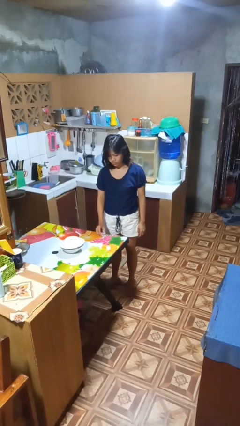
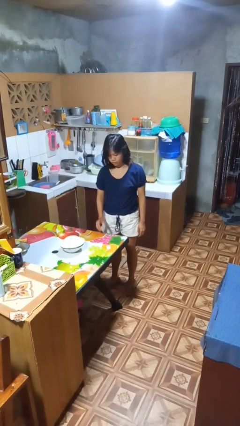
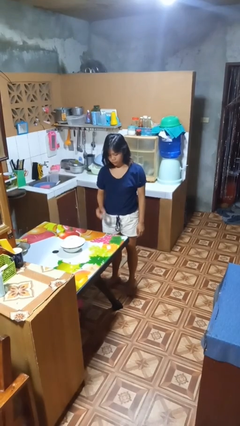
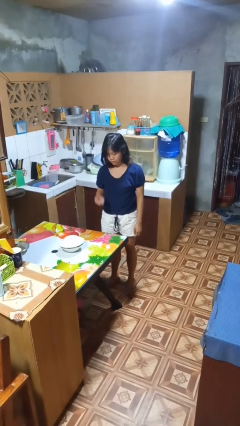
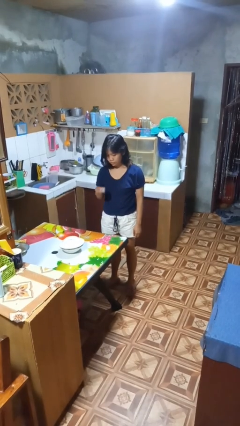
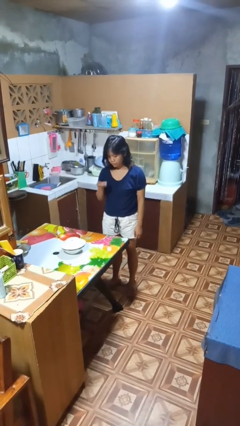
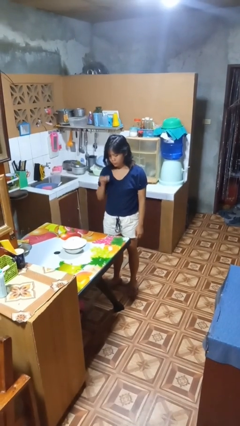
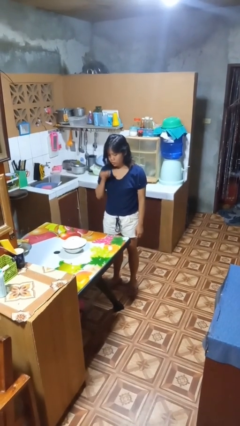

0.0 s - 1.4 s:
person picks up object from table

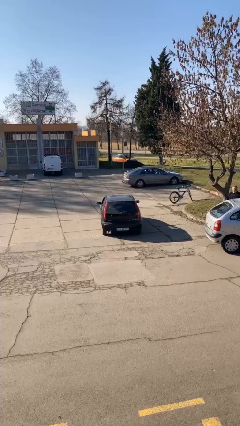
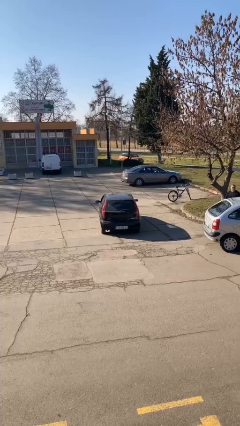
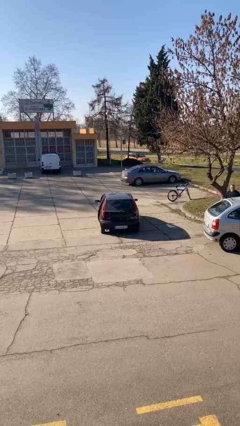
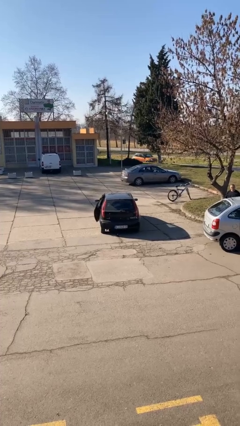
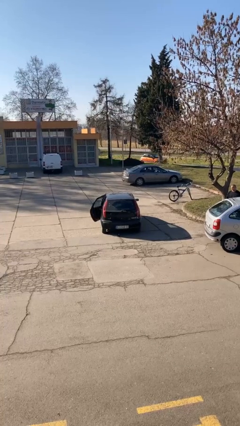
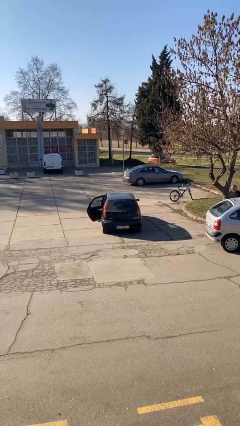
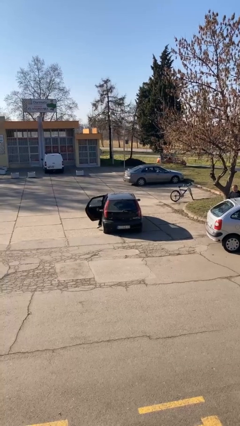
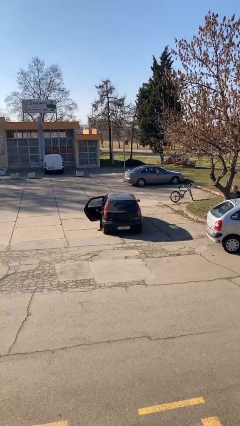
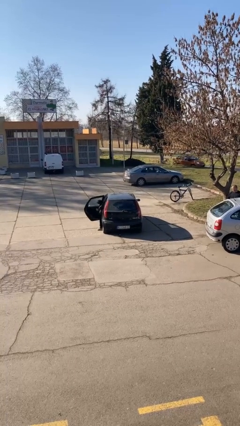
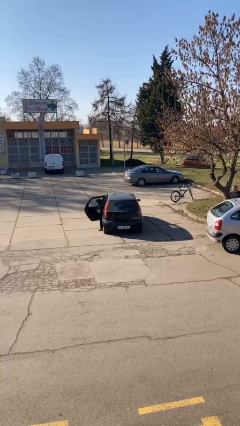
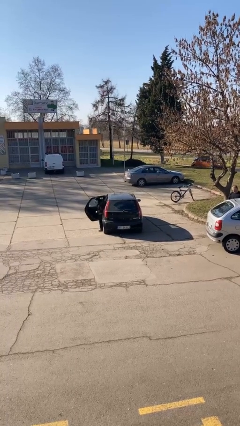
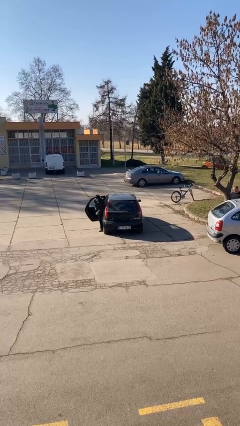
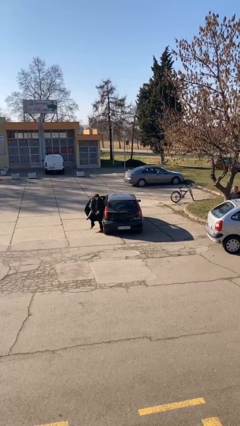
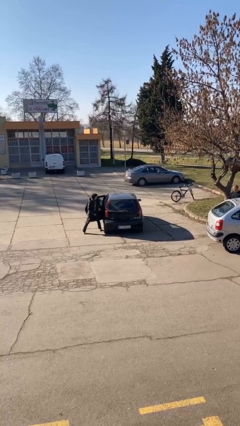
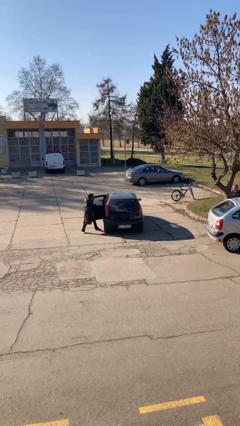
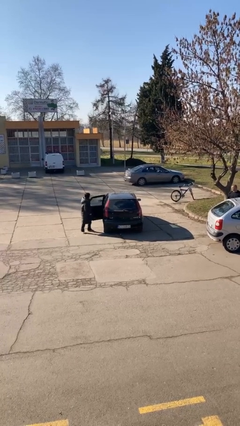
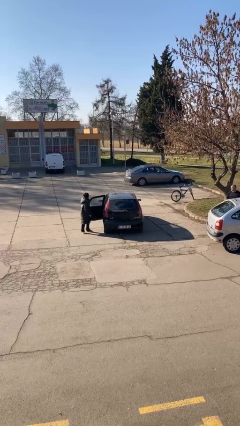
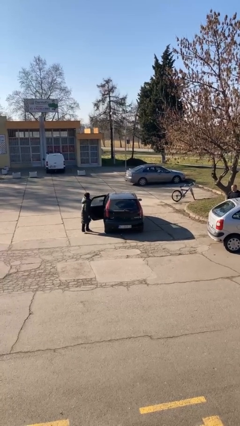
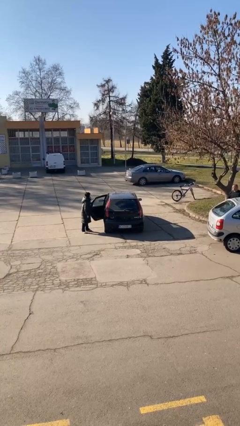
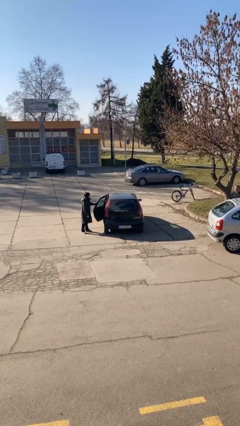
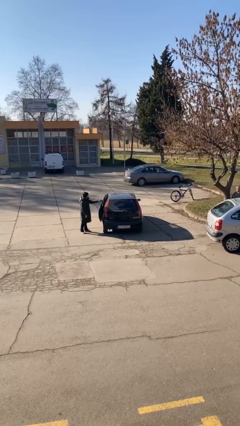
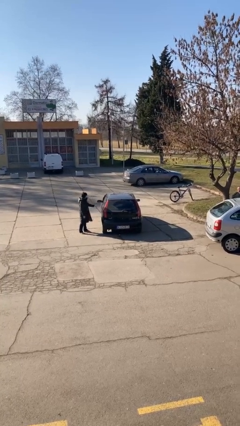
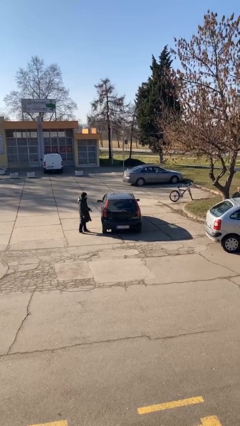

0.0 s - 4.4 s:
car drops off person

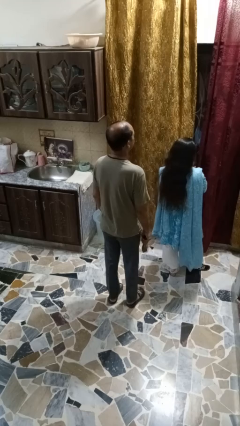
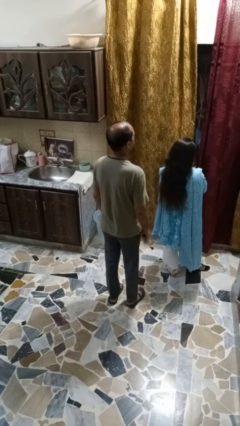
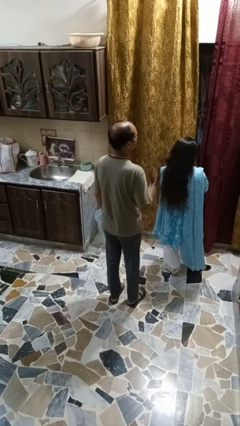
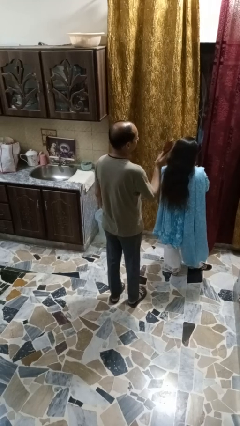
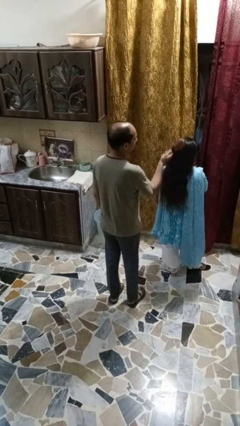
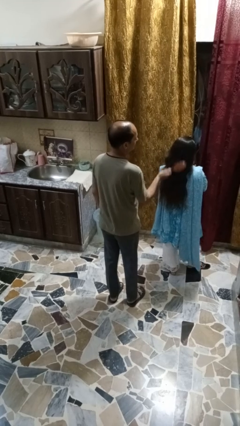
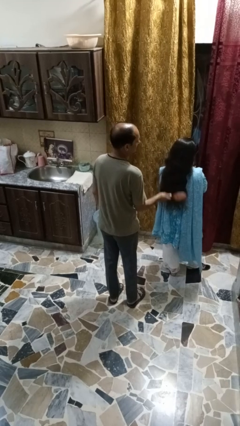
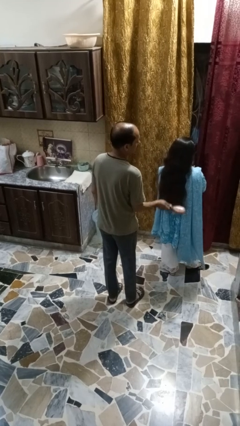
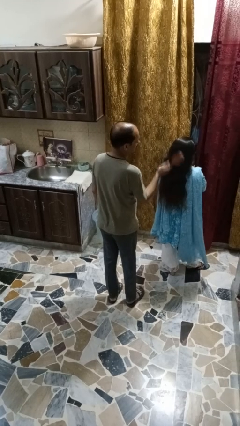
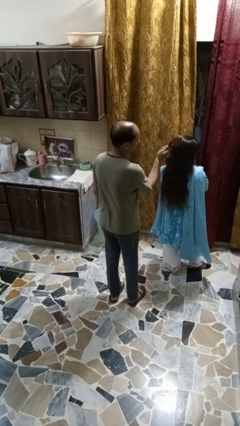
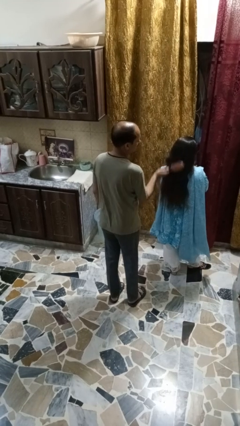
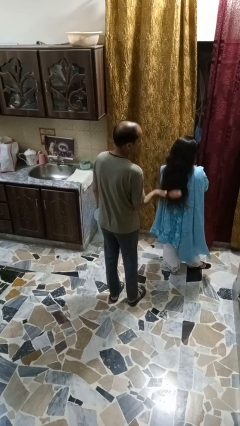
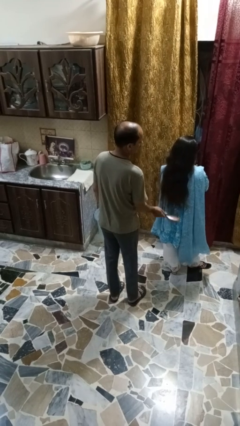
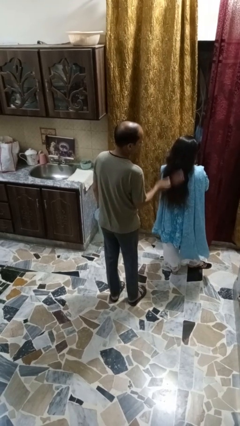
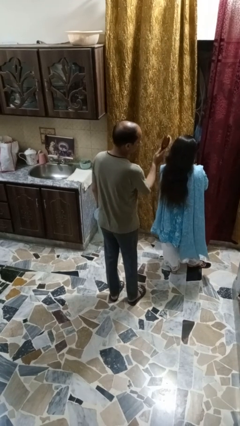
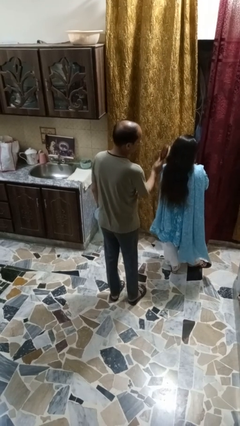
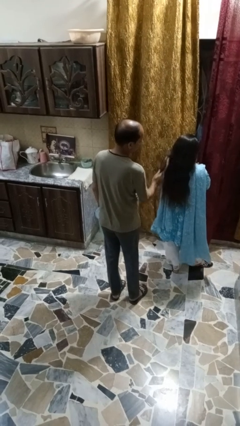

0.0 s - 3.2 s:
person brushes hair of person

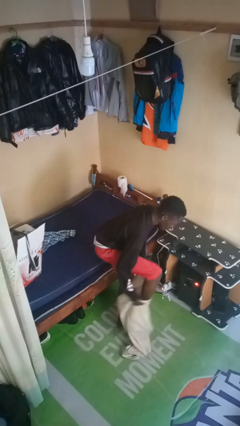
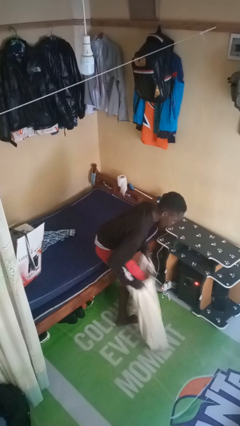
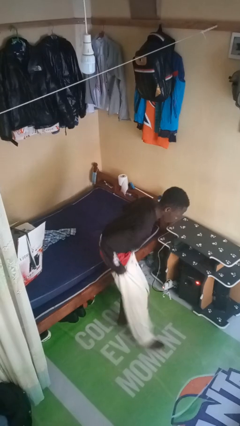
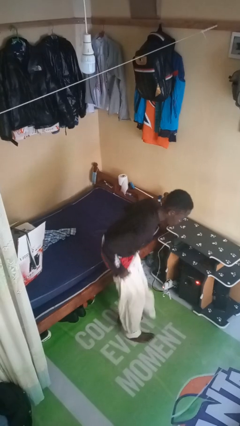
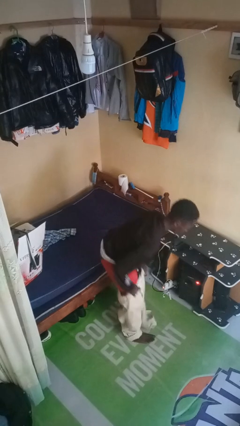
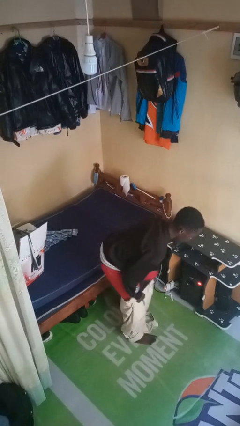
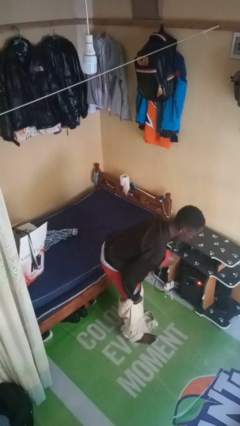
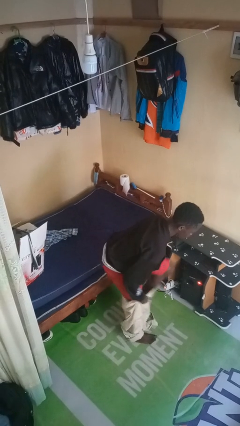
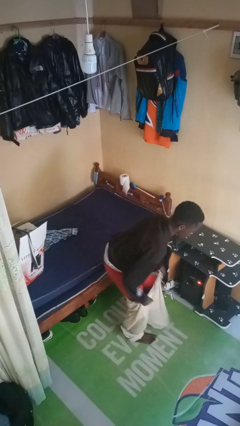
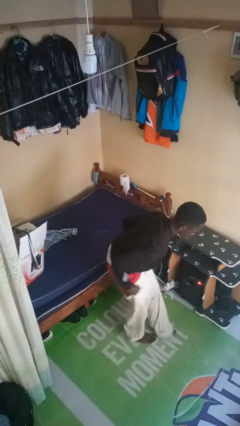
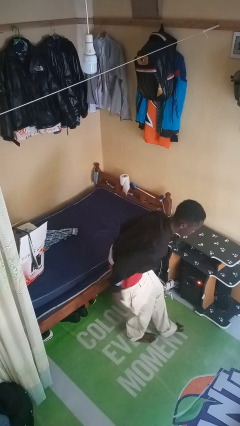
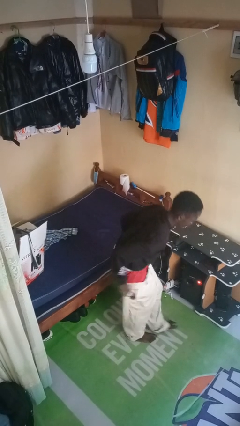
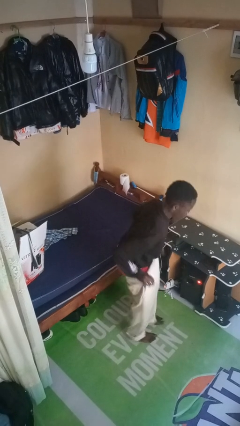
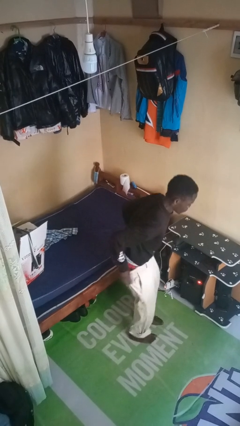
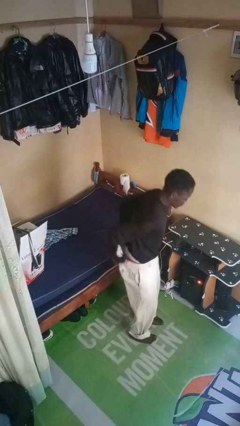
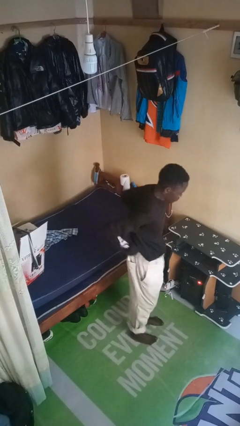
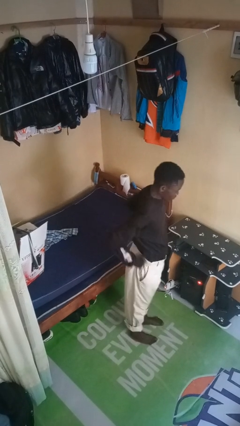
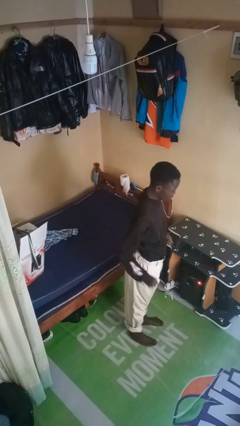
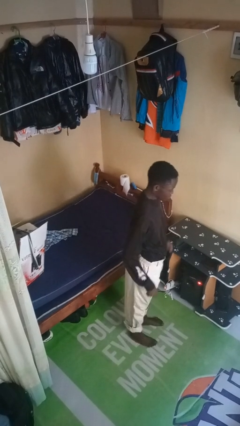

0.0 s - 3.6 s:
person puts on pants

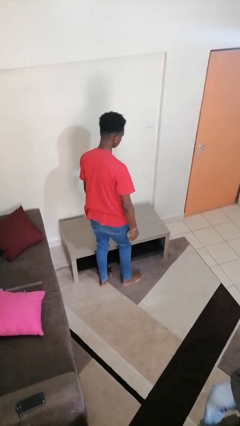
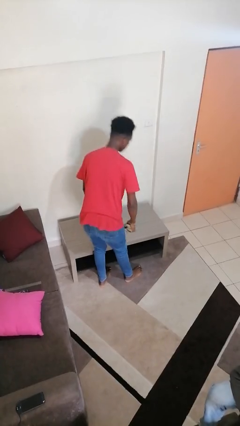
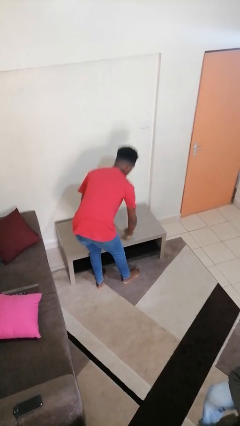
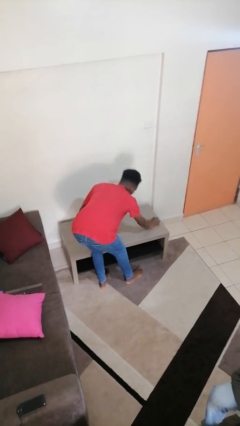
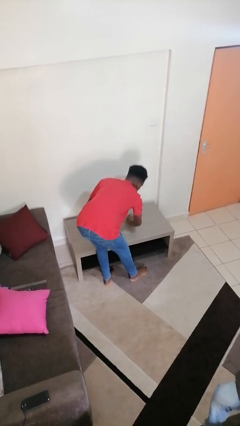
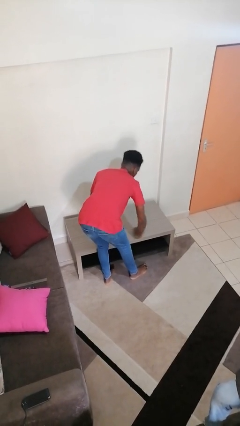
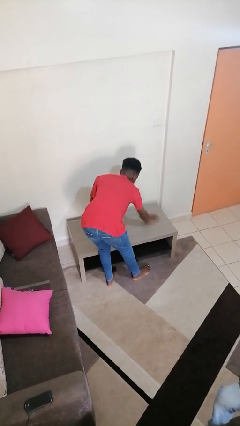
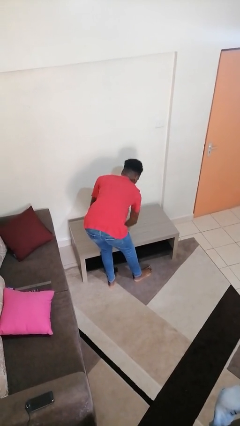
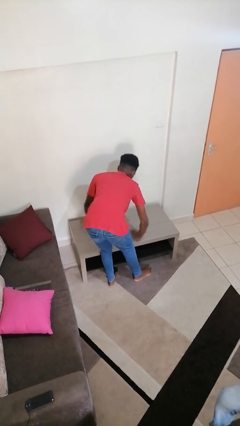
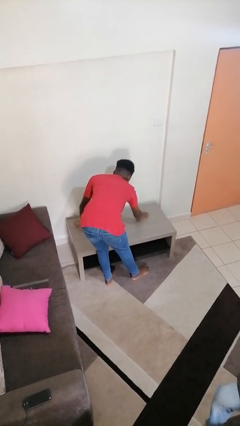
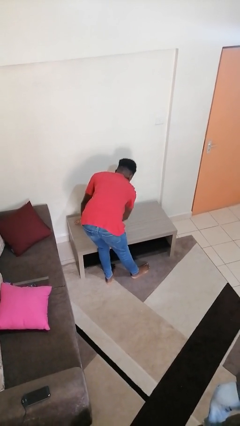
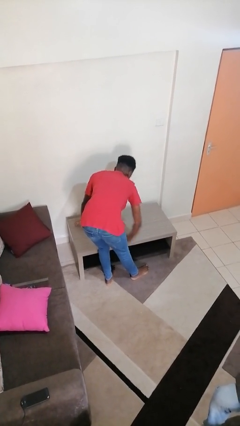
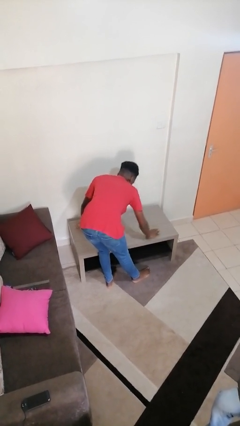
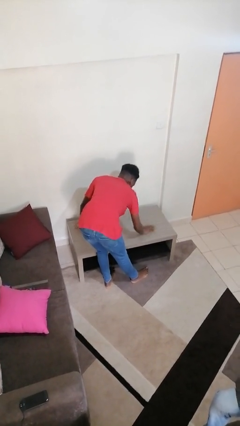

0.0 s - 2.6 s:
person cleans table with rag

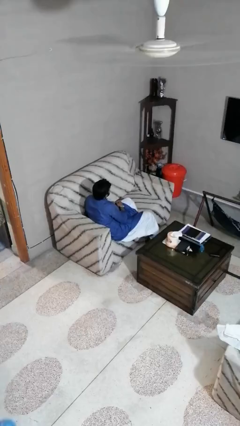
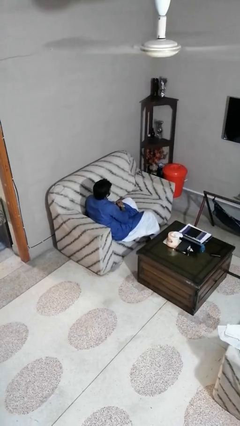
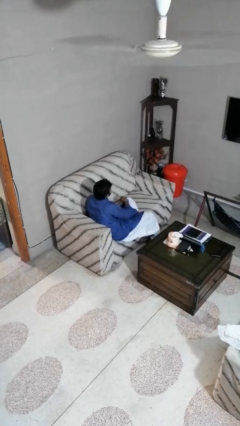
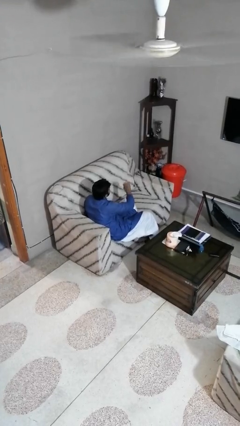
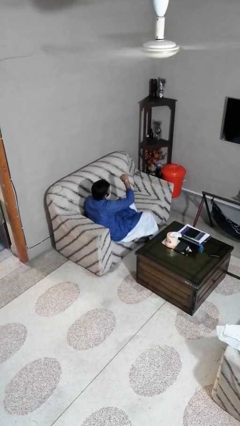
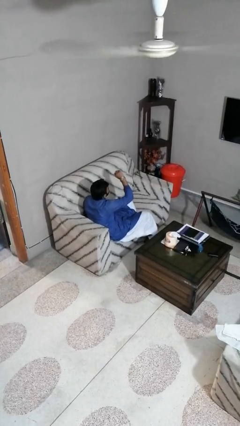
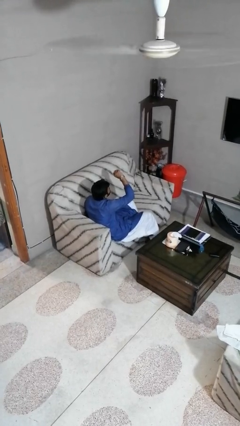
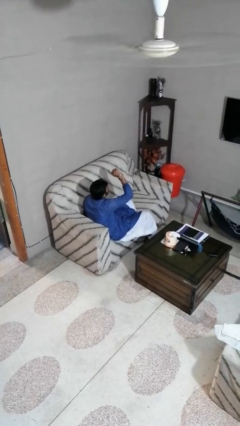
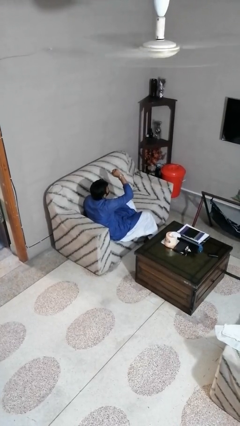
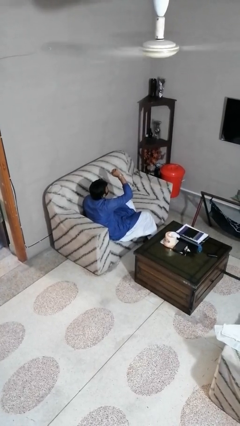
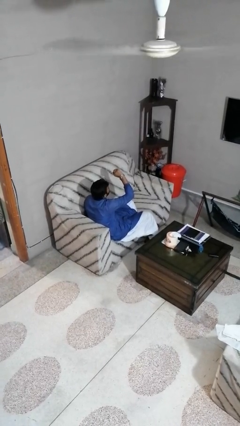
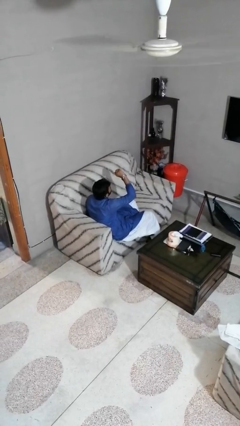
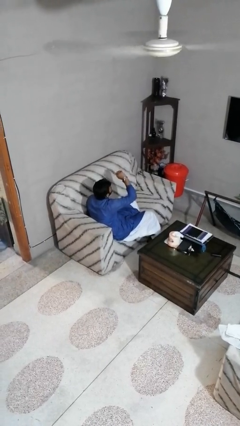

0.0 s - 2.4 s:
person looks at wristwatch

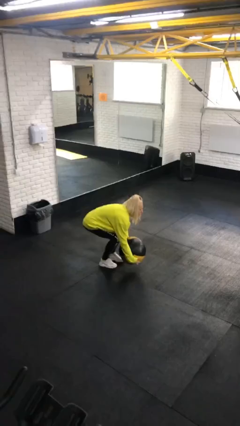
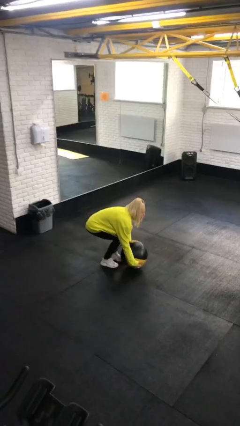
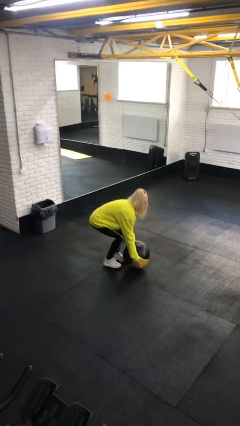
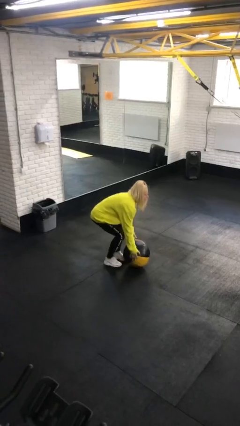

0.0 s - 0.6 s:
person puts down object on floor
